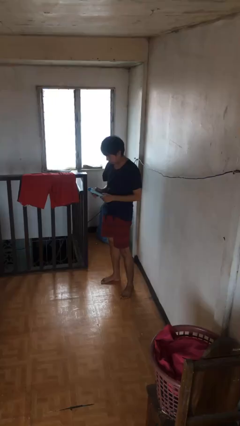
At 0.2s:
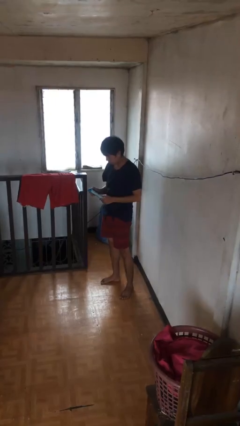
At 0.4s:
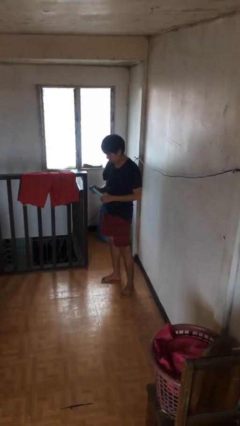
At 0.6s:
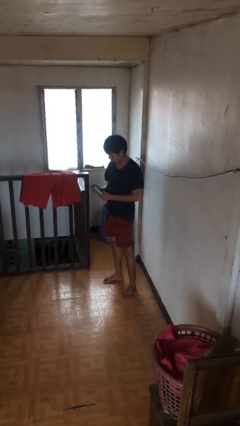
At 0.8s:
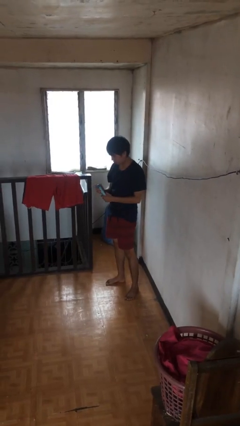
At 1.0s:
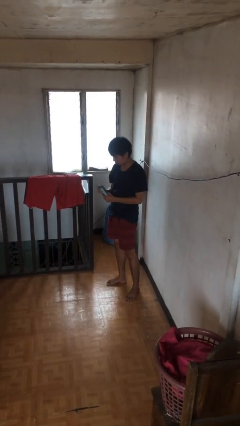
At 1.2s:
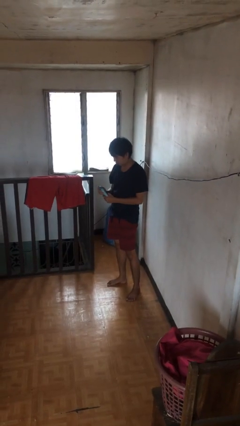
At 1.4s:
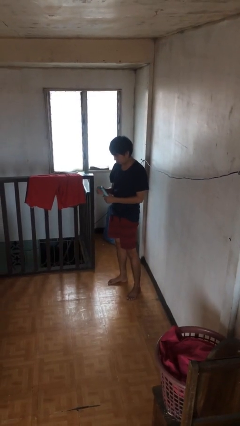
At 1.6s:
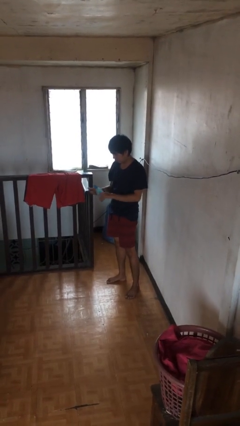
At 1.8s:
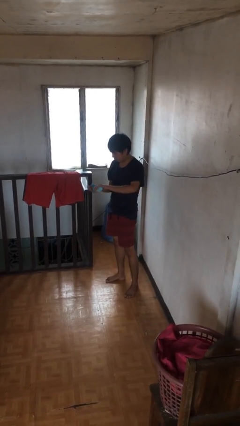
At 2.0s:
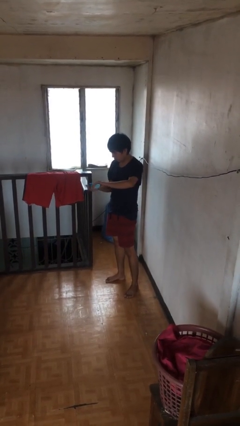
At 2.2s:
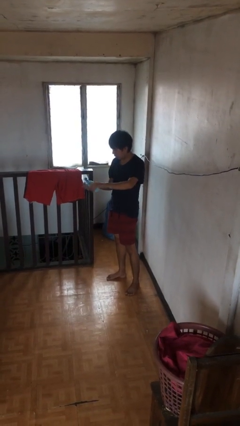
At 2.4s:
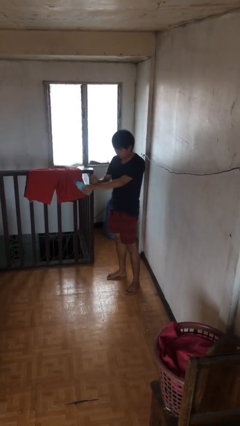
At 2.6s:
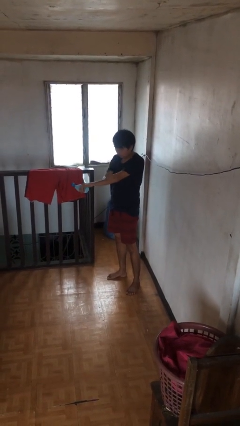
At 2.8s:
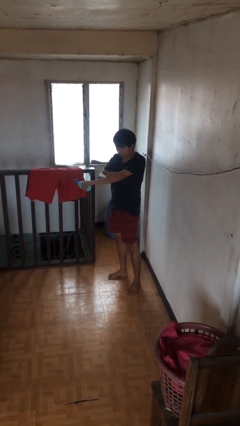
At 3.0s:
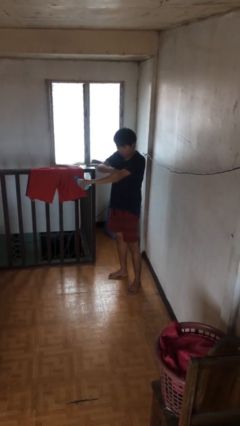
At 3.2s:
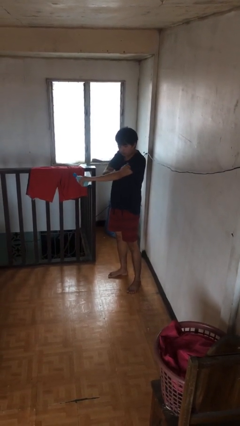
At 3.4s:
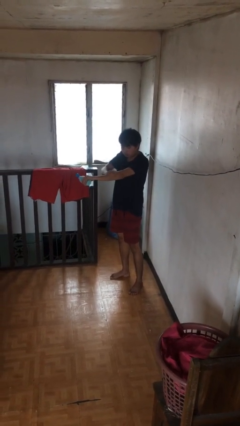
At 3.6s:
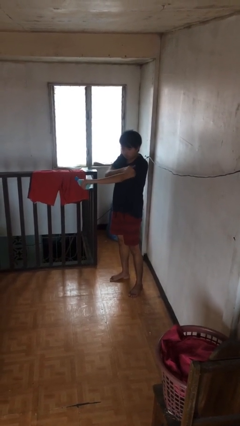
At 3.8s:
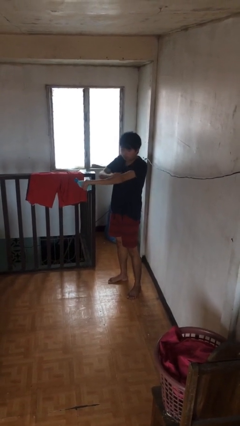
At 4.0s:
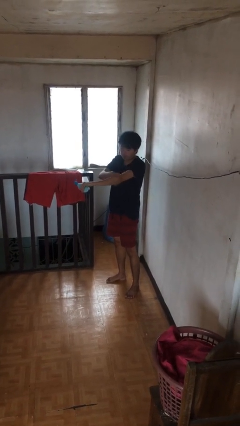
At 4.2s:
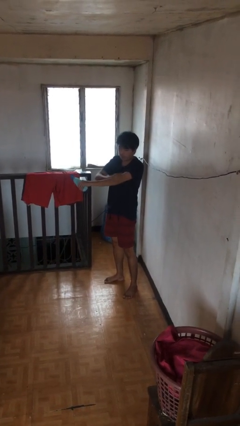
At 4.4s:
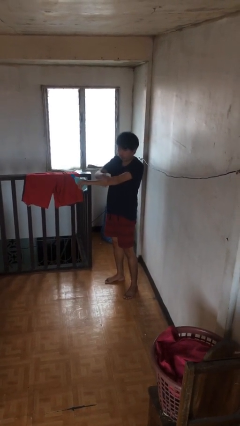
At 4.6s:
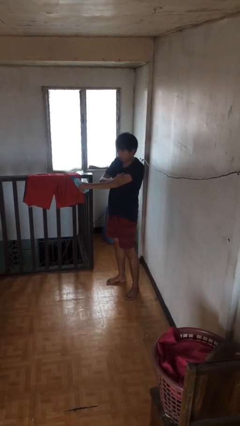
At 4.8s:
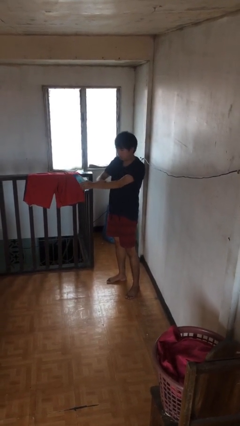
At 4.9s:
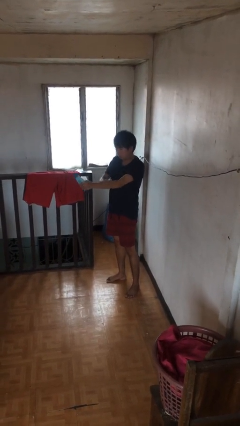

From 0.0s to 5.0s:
person applies sunscreen

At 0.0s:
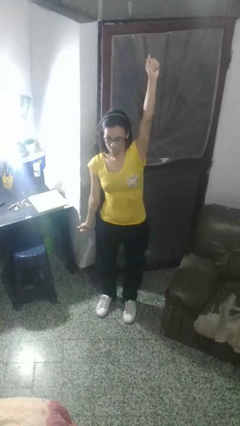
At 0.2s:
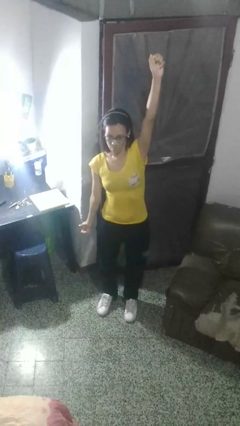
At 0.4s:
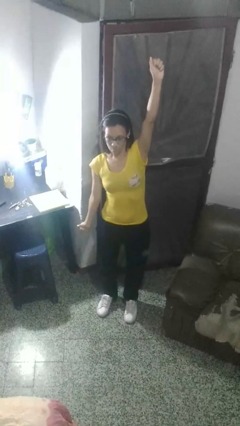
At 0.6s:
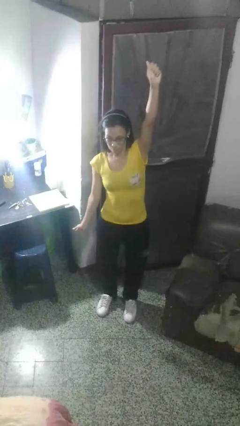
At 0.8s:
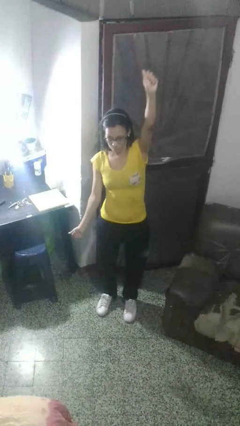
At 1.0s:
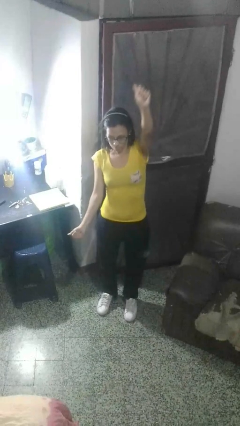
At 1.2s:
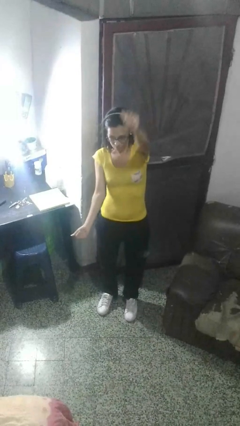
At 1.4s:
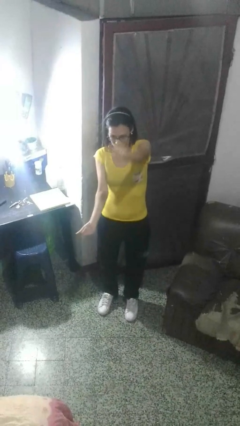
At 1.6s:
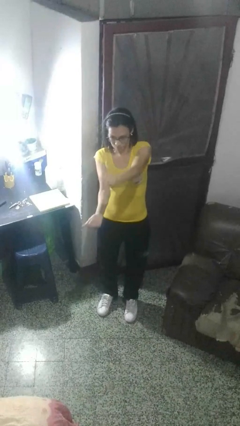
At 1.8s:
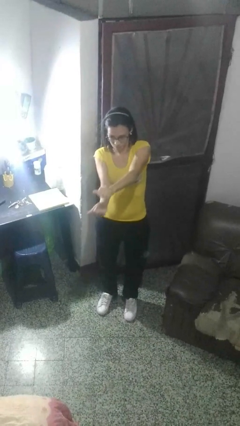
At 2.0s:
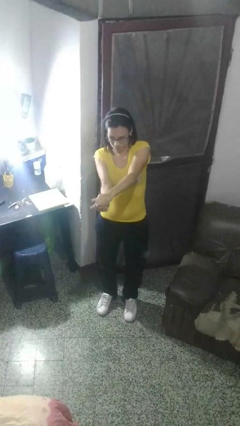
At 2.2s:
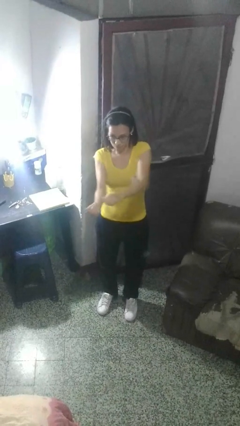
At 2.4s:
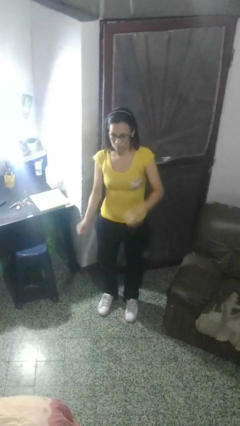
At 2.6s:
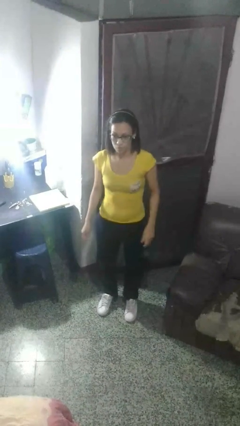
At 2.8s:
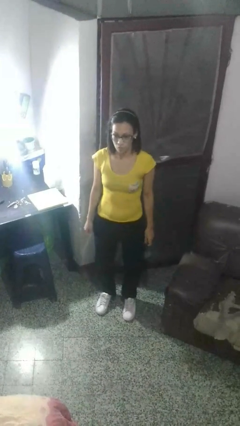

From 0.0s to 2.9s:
person gestures zoom out

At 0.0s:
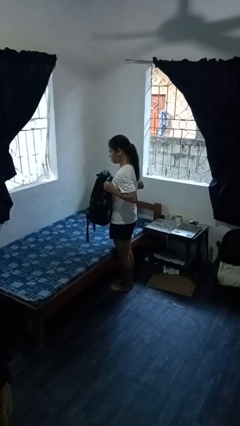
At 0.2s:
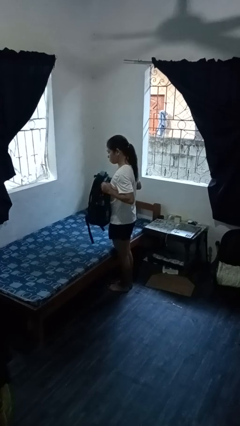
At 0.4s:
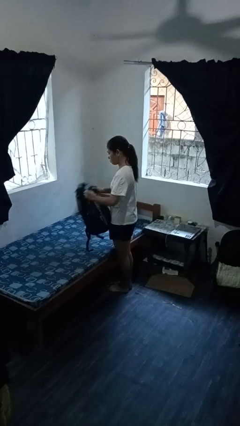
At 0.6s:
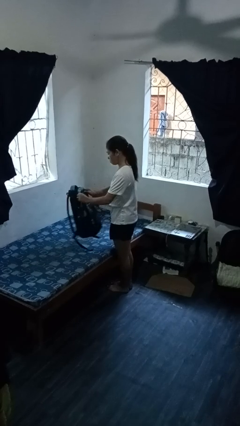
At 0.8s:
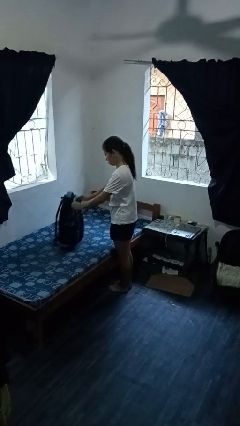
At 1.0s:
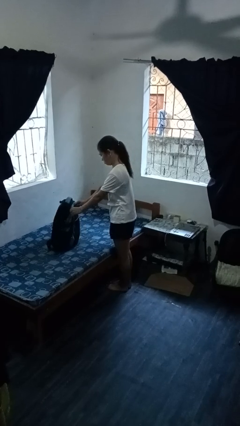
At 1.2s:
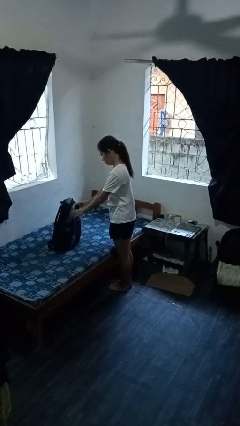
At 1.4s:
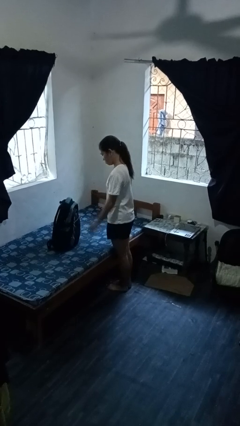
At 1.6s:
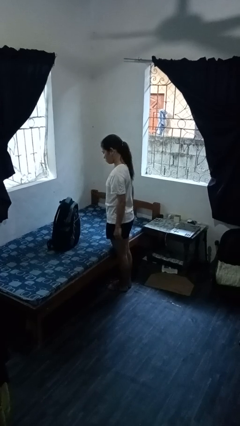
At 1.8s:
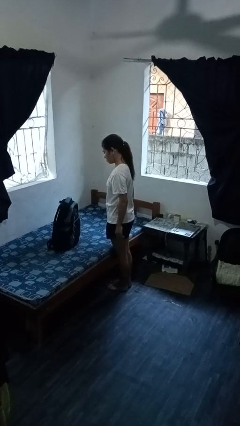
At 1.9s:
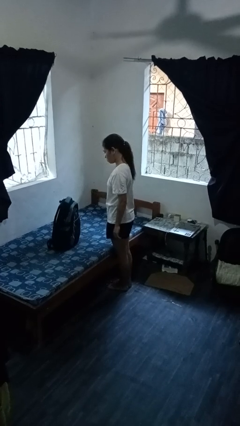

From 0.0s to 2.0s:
person puts down object on bed

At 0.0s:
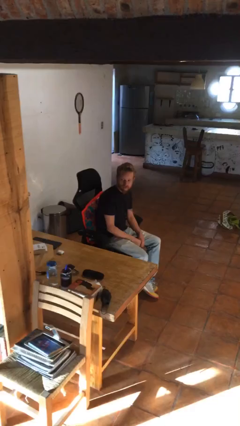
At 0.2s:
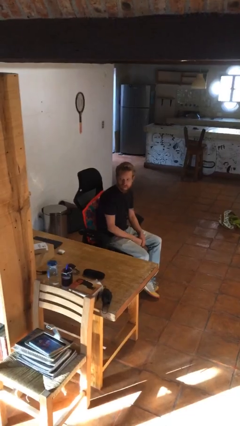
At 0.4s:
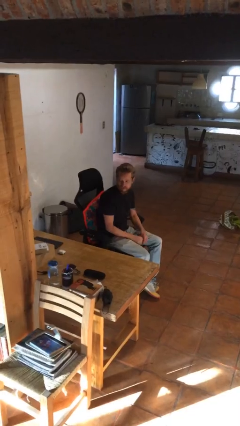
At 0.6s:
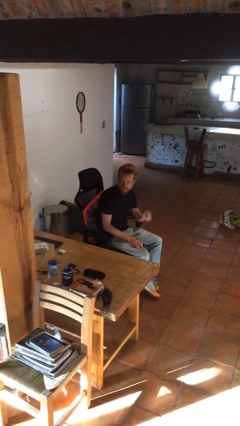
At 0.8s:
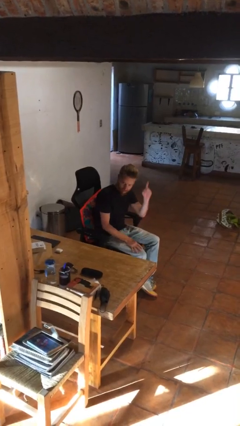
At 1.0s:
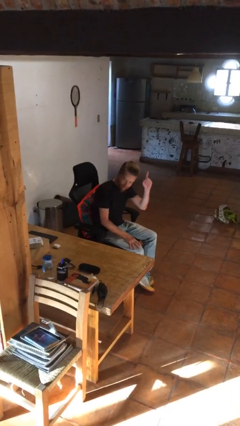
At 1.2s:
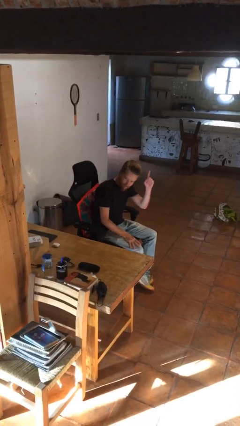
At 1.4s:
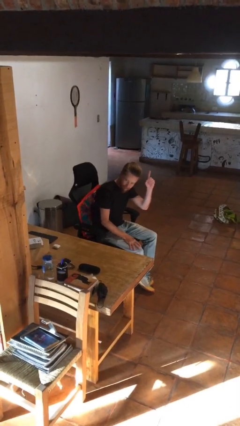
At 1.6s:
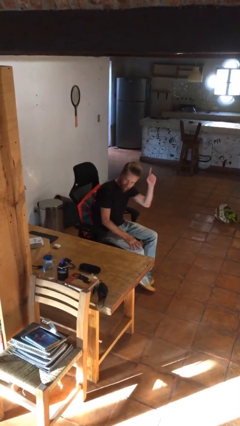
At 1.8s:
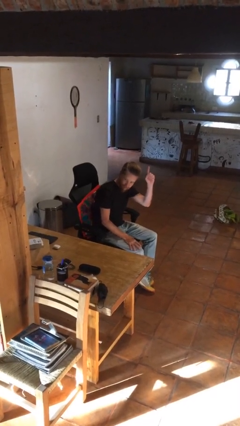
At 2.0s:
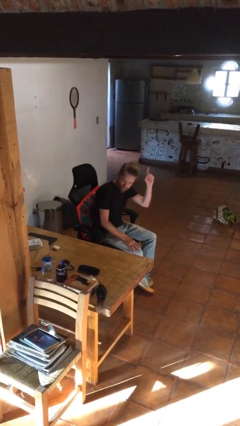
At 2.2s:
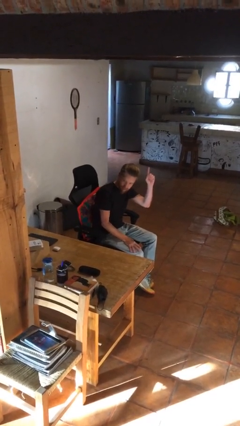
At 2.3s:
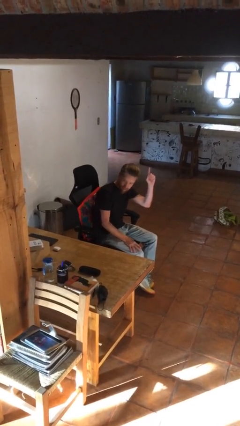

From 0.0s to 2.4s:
person gestures raise hand

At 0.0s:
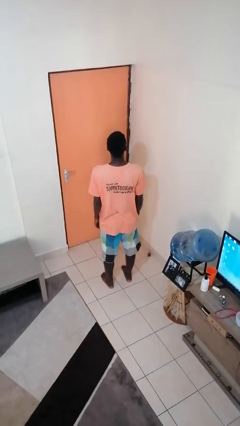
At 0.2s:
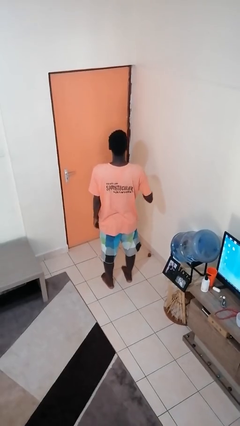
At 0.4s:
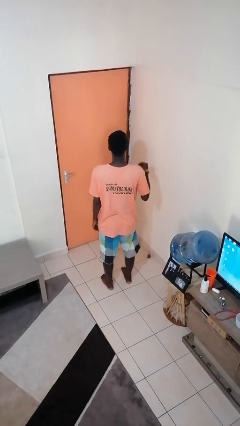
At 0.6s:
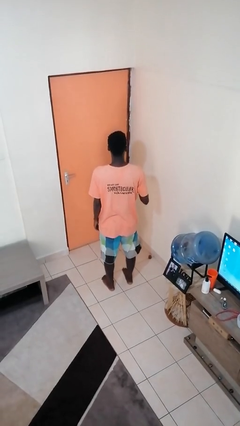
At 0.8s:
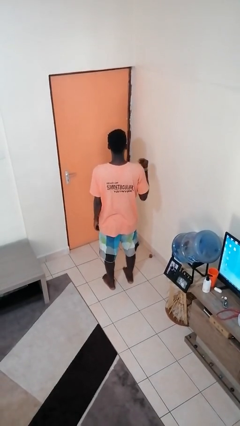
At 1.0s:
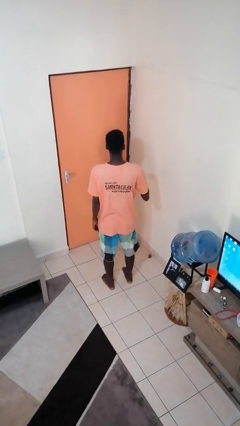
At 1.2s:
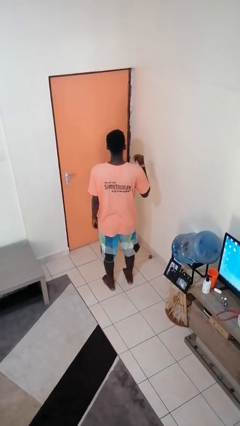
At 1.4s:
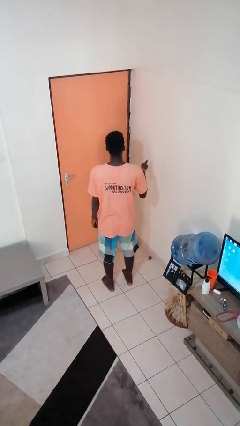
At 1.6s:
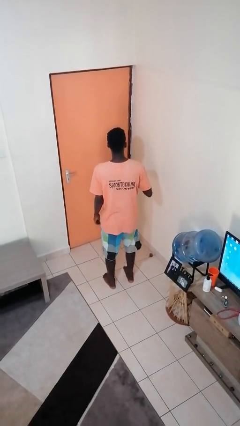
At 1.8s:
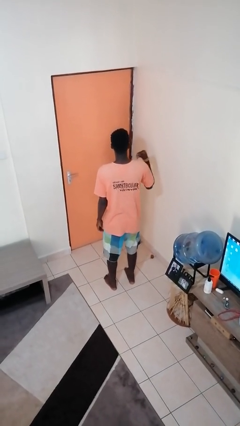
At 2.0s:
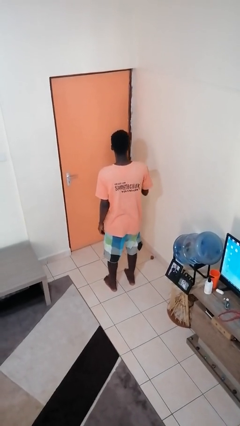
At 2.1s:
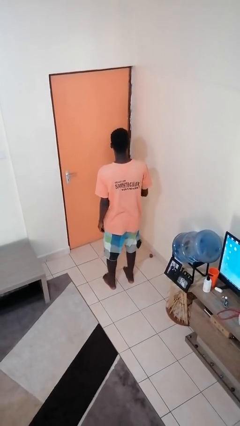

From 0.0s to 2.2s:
person snaps fingers

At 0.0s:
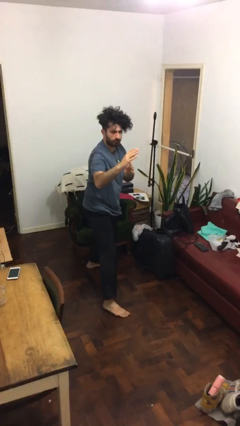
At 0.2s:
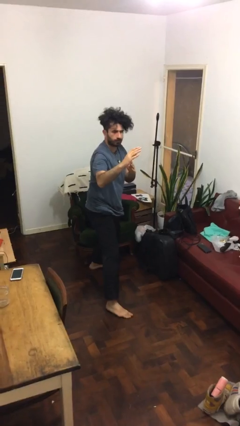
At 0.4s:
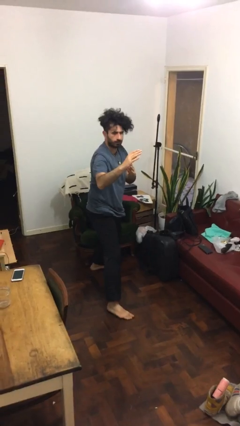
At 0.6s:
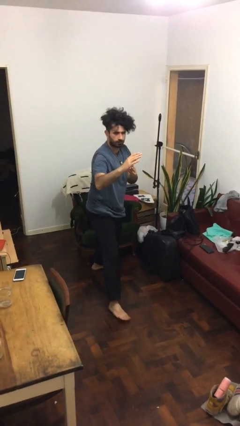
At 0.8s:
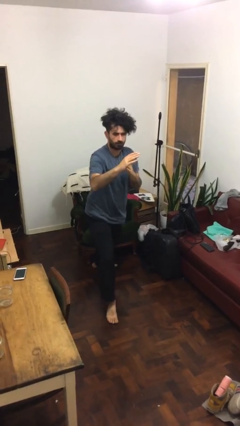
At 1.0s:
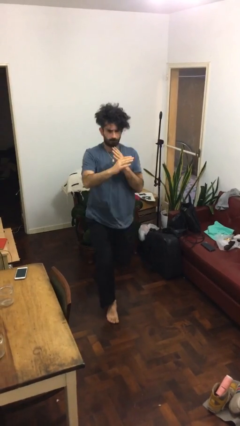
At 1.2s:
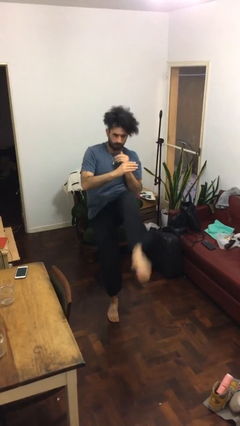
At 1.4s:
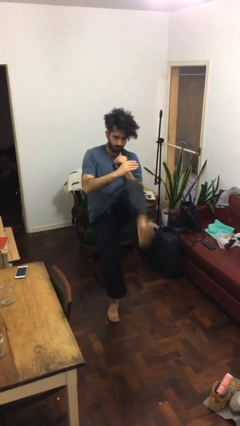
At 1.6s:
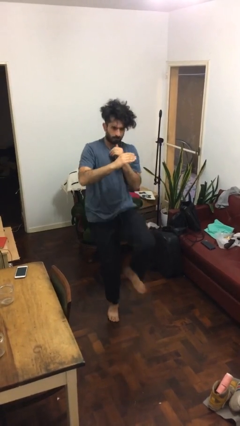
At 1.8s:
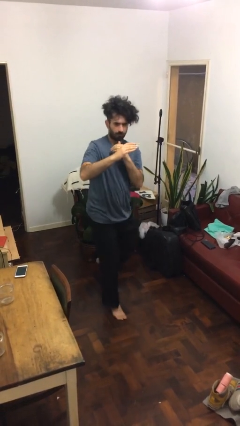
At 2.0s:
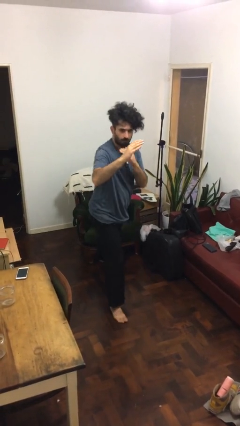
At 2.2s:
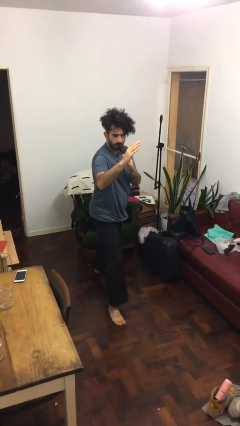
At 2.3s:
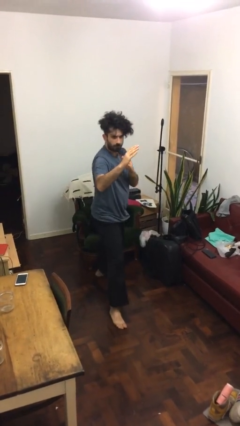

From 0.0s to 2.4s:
person karate kicks

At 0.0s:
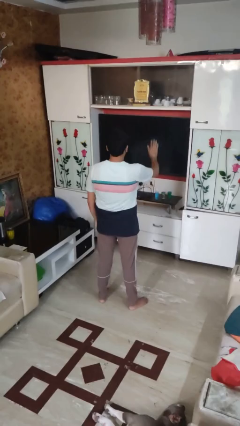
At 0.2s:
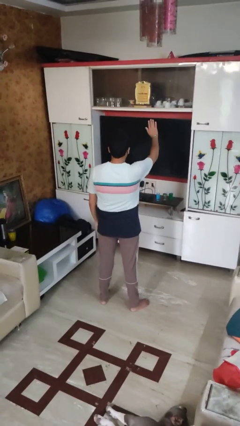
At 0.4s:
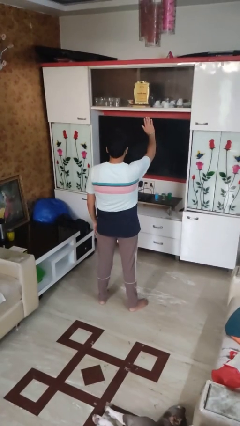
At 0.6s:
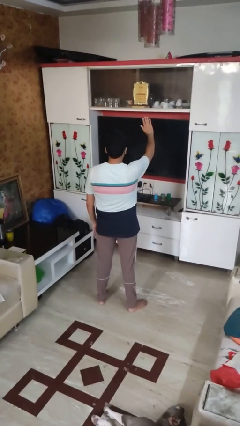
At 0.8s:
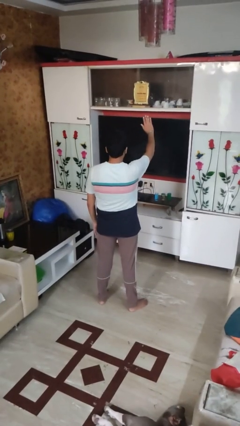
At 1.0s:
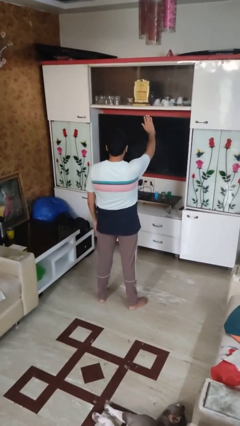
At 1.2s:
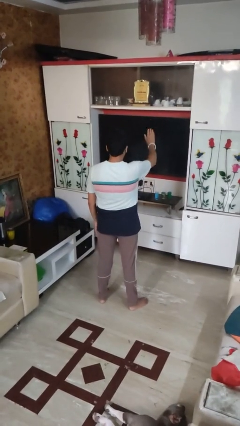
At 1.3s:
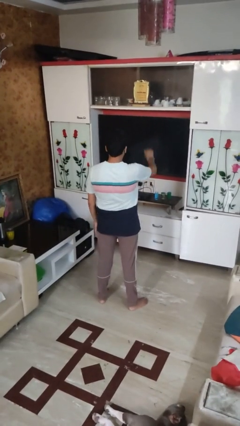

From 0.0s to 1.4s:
person gestures stop
